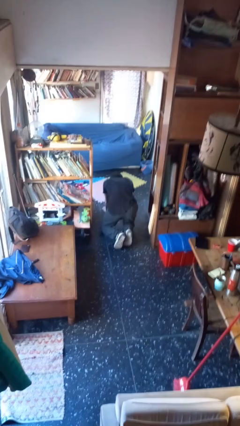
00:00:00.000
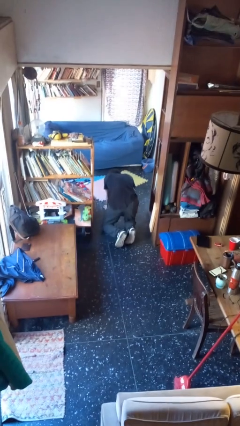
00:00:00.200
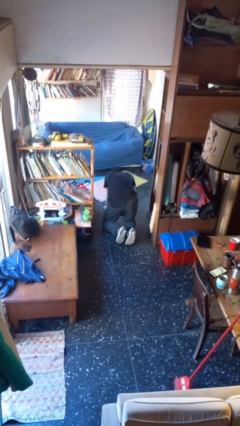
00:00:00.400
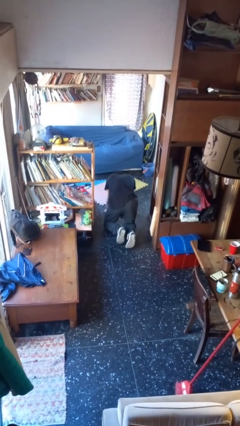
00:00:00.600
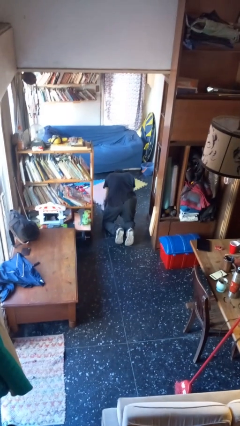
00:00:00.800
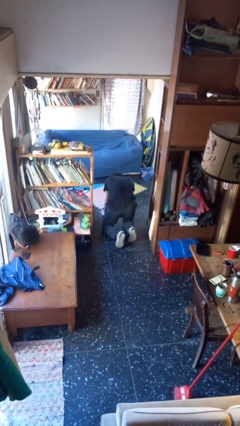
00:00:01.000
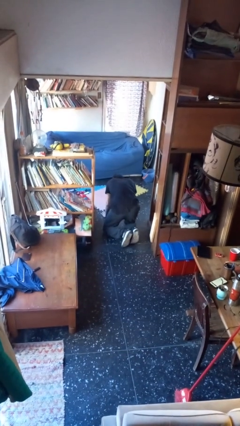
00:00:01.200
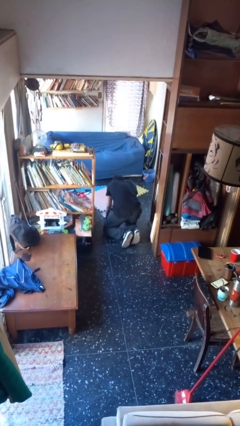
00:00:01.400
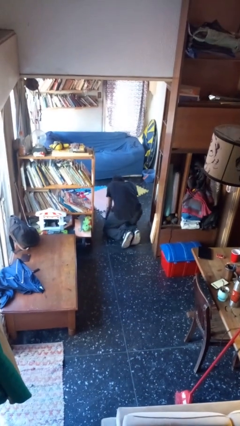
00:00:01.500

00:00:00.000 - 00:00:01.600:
person crawls

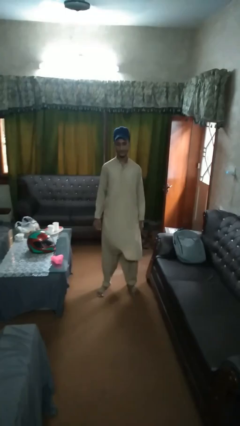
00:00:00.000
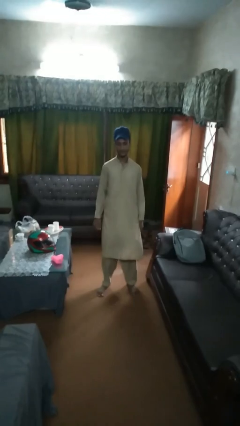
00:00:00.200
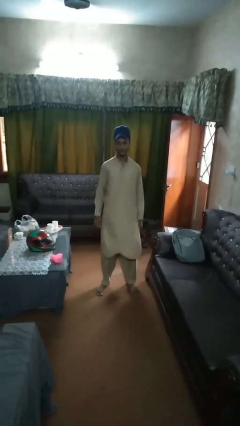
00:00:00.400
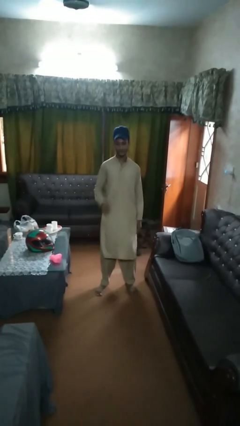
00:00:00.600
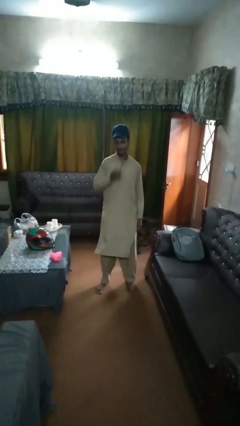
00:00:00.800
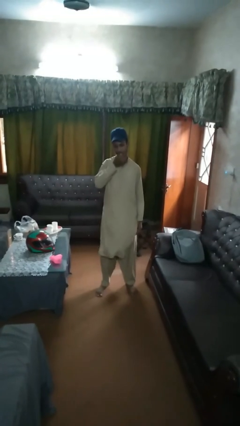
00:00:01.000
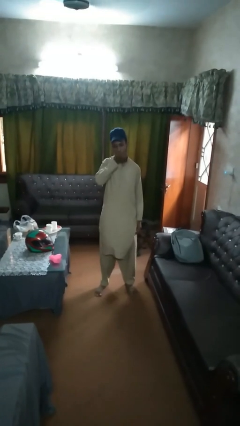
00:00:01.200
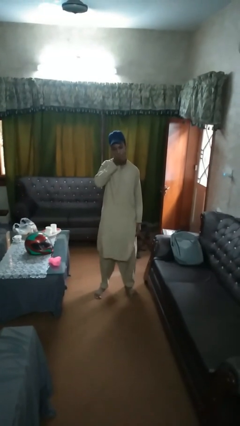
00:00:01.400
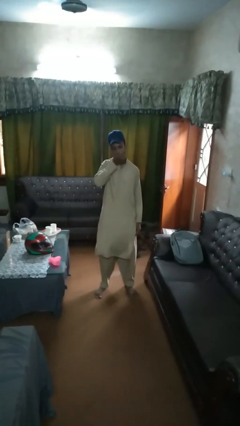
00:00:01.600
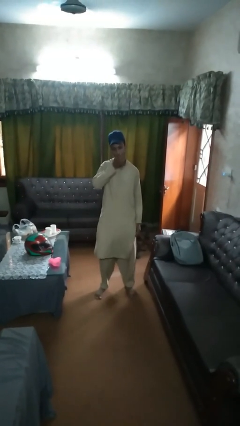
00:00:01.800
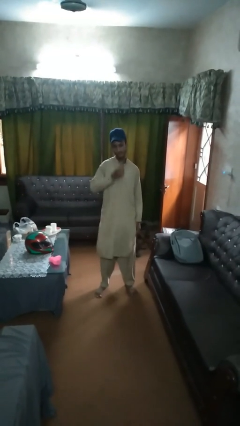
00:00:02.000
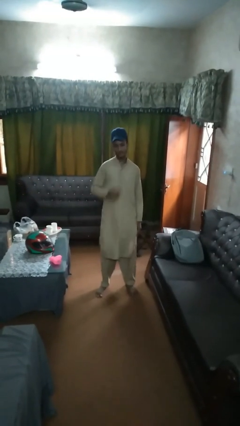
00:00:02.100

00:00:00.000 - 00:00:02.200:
person eats apple

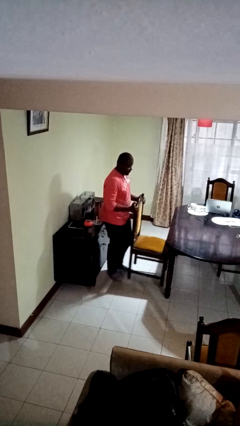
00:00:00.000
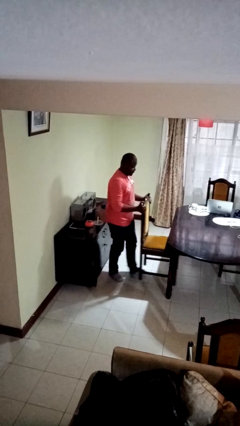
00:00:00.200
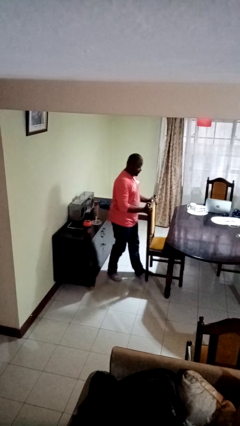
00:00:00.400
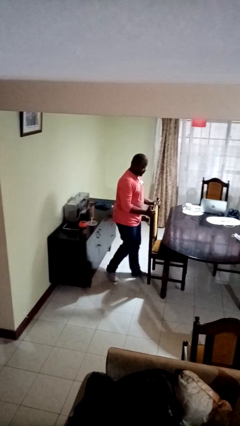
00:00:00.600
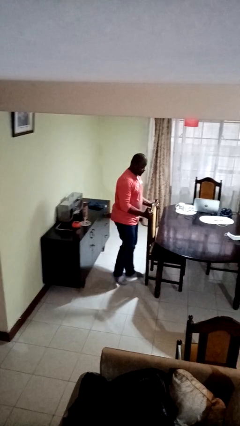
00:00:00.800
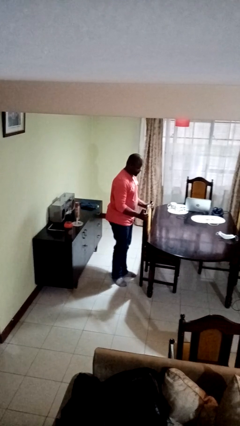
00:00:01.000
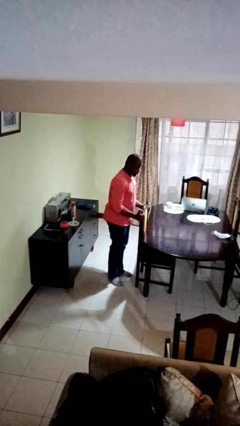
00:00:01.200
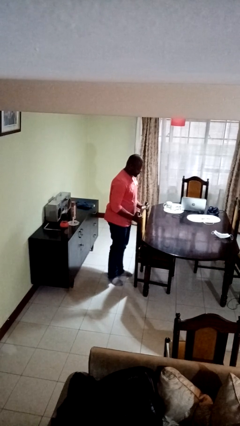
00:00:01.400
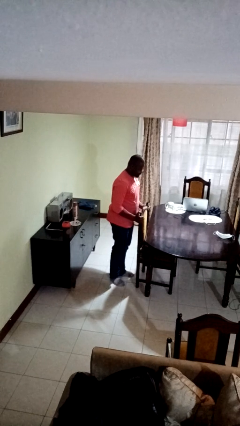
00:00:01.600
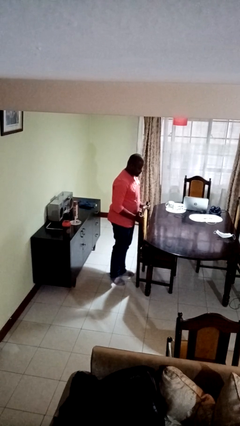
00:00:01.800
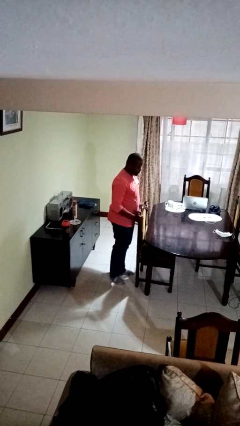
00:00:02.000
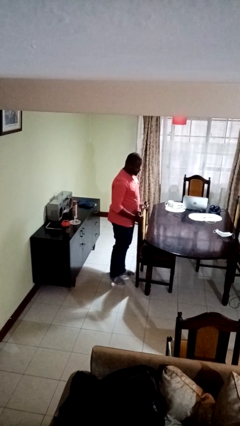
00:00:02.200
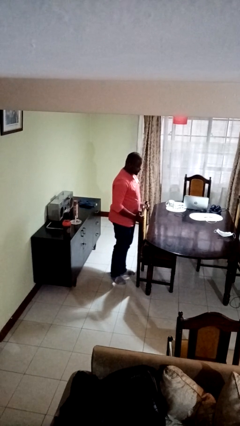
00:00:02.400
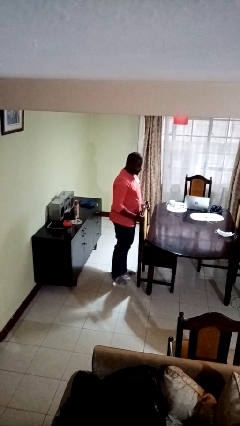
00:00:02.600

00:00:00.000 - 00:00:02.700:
person pushes in chair

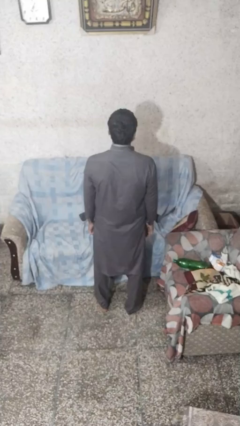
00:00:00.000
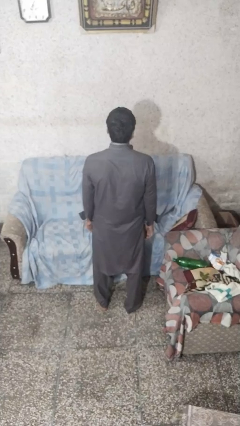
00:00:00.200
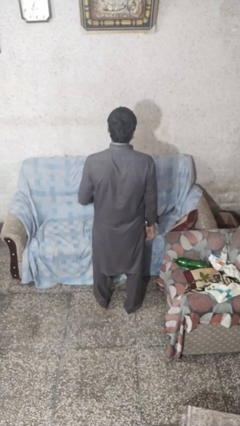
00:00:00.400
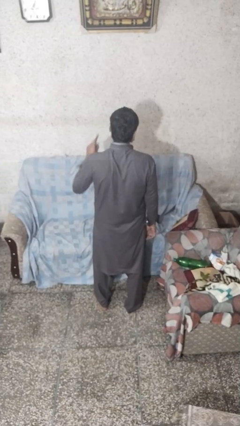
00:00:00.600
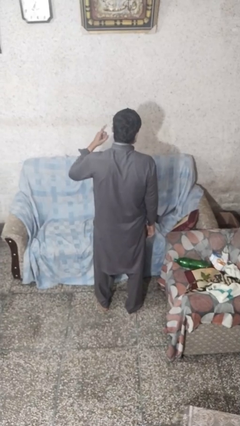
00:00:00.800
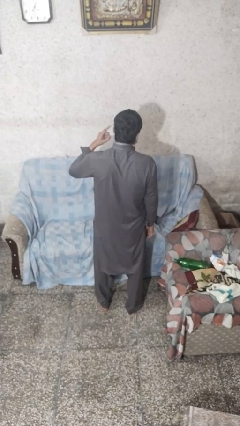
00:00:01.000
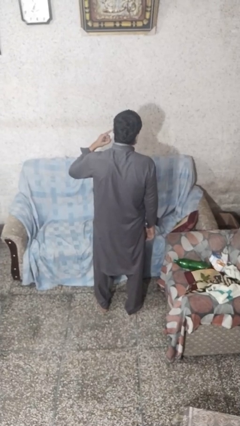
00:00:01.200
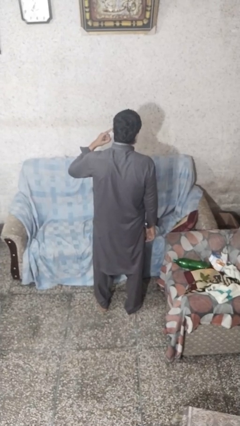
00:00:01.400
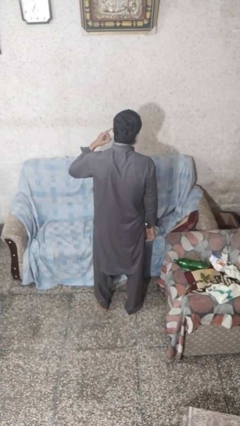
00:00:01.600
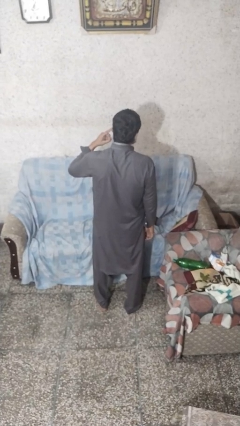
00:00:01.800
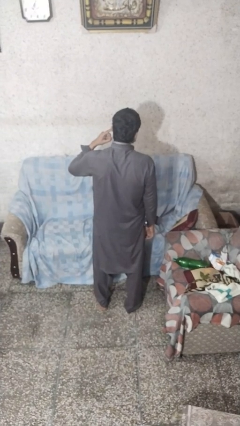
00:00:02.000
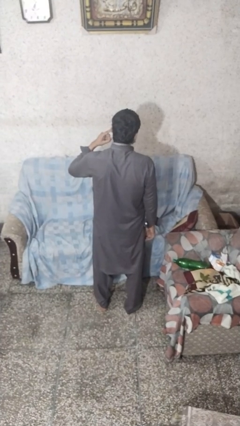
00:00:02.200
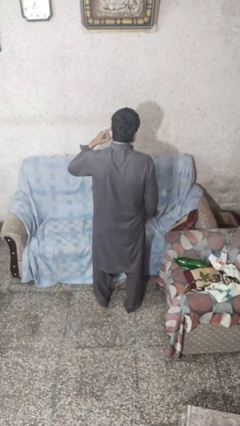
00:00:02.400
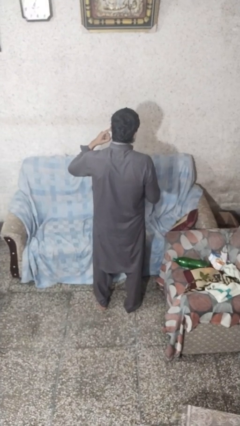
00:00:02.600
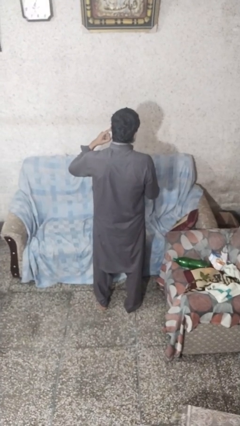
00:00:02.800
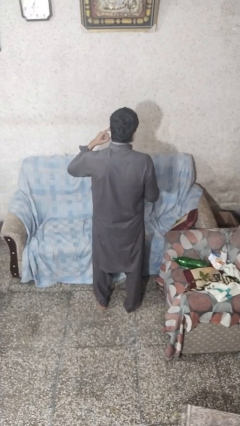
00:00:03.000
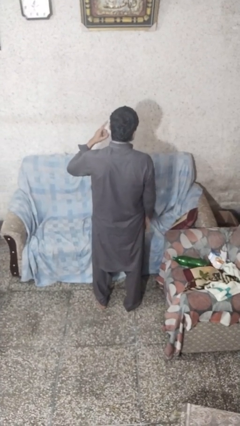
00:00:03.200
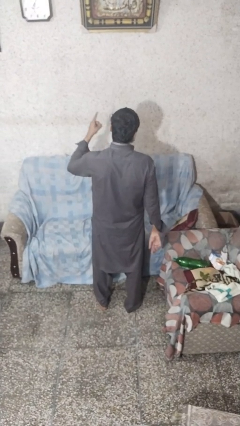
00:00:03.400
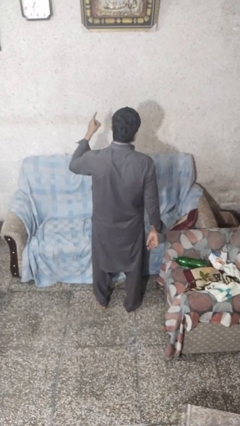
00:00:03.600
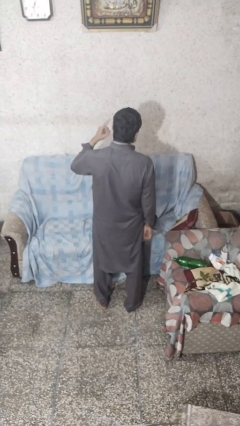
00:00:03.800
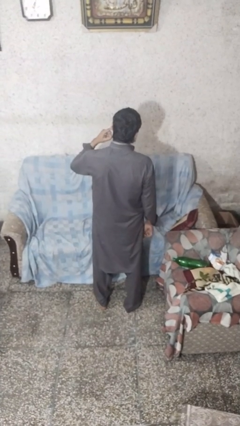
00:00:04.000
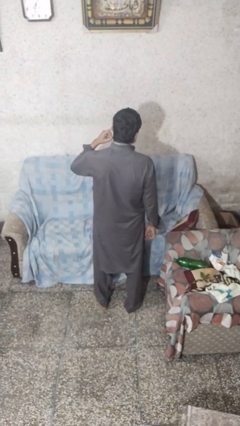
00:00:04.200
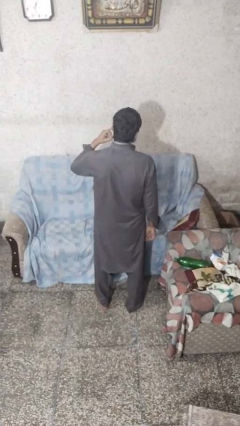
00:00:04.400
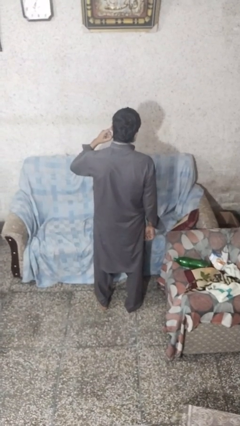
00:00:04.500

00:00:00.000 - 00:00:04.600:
person gestures listen closely

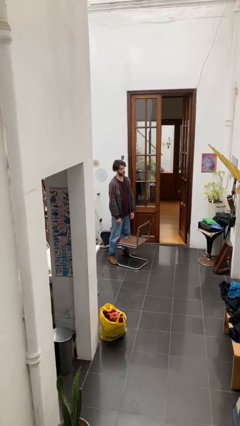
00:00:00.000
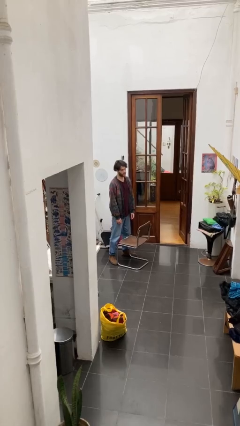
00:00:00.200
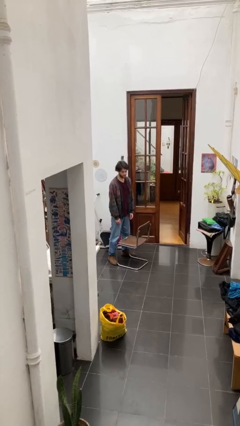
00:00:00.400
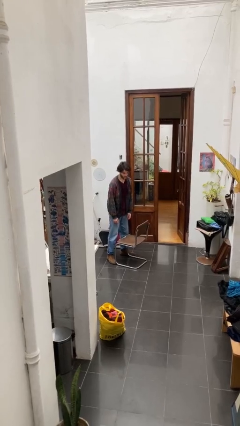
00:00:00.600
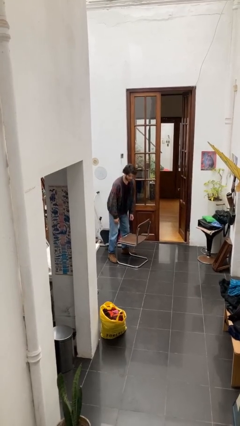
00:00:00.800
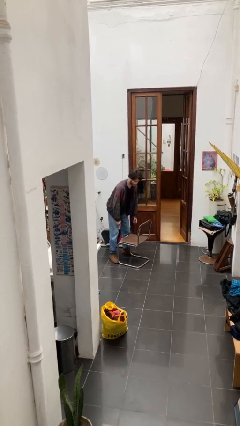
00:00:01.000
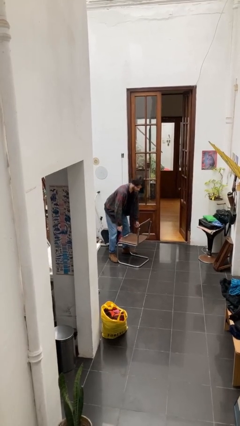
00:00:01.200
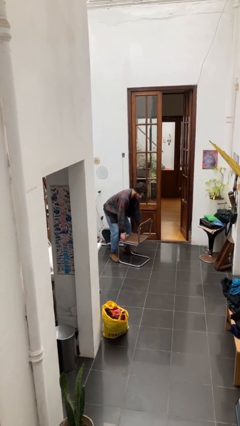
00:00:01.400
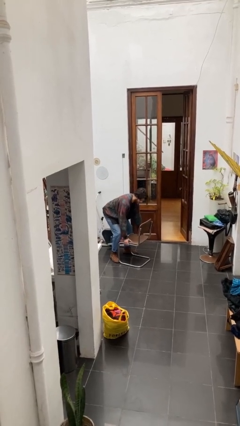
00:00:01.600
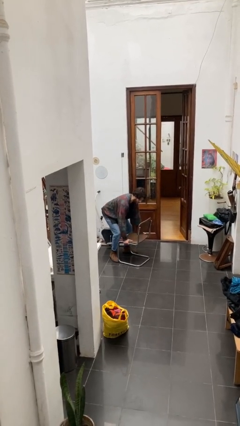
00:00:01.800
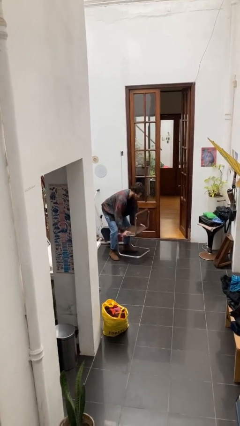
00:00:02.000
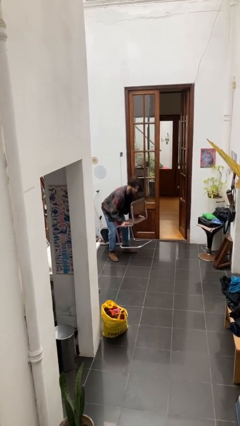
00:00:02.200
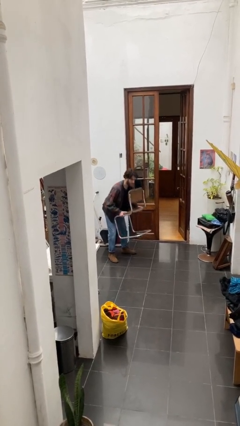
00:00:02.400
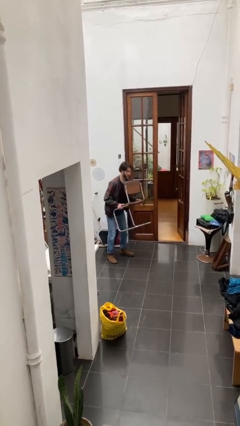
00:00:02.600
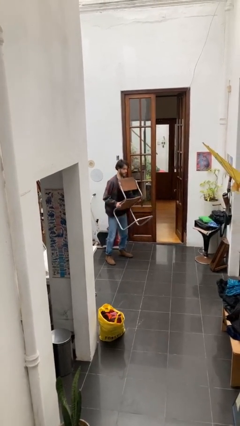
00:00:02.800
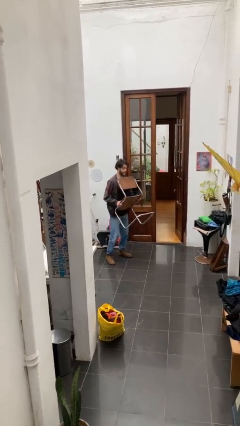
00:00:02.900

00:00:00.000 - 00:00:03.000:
person picks up object from floor

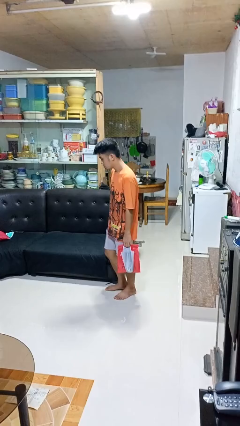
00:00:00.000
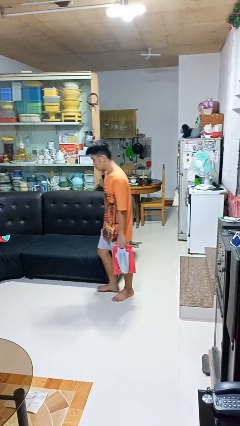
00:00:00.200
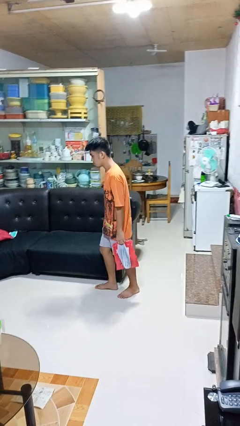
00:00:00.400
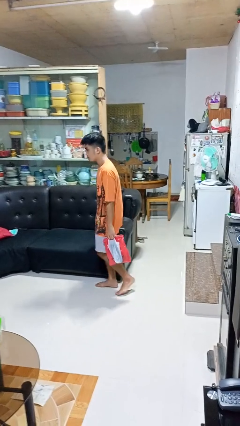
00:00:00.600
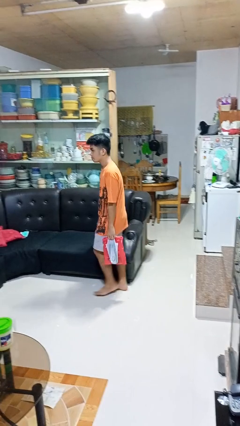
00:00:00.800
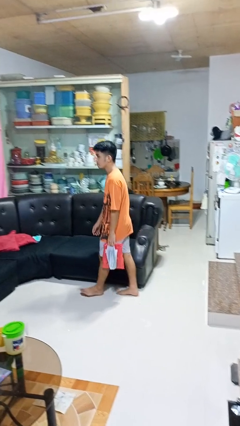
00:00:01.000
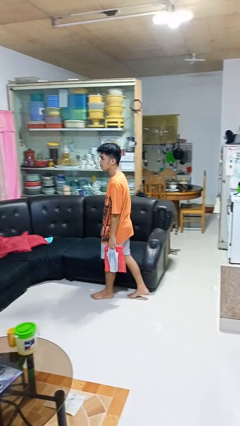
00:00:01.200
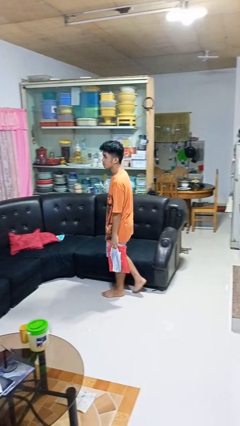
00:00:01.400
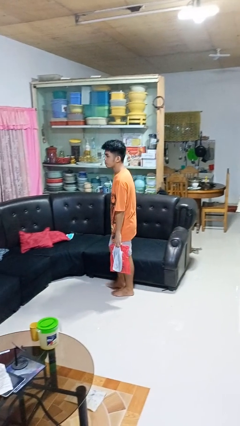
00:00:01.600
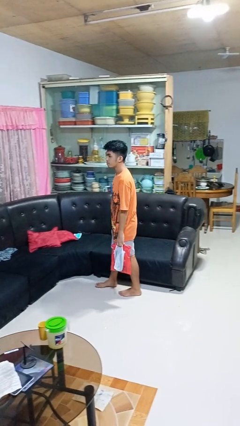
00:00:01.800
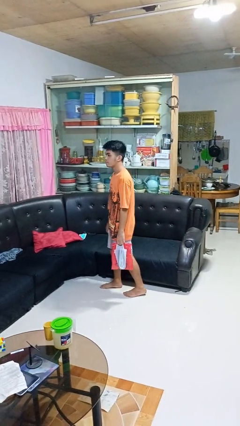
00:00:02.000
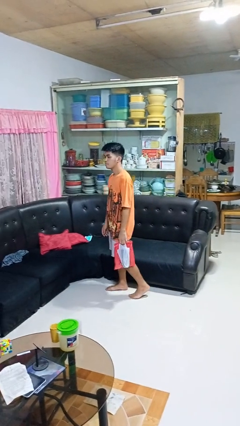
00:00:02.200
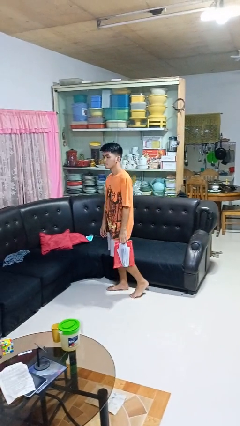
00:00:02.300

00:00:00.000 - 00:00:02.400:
person carries groceries

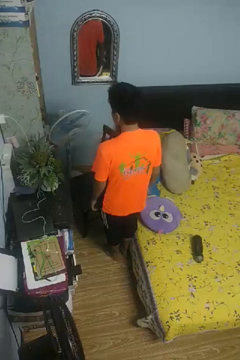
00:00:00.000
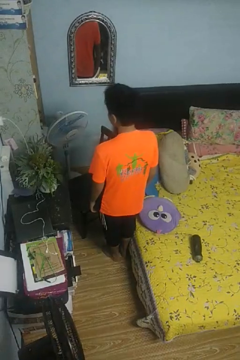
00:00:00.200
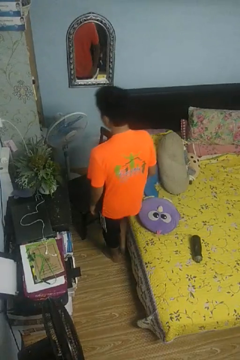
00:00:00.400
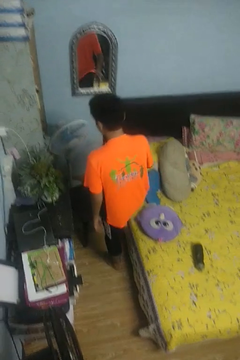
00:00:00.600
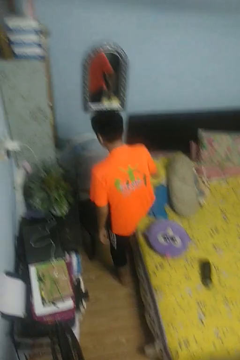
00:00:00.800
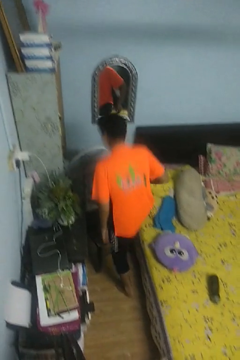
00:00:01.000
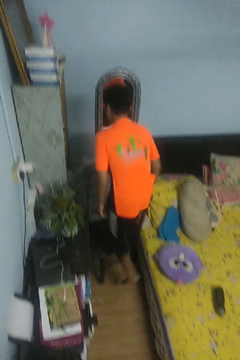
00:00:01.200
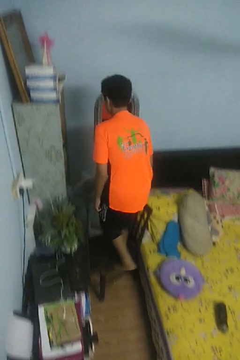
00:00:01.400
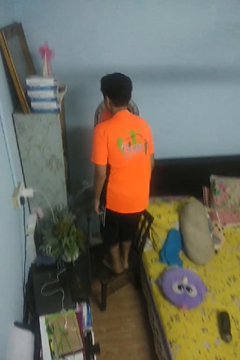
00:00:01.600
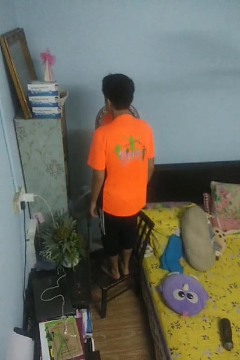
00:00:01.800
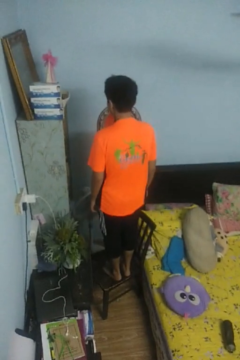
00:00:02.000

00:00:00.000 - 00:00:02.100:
person climbs on chair
